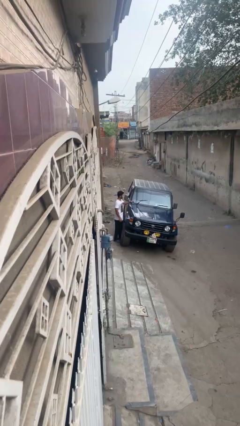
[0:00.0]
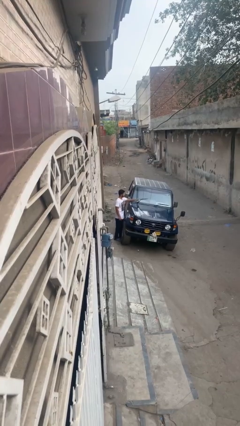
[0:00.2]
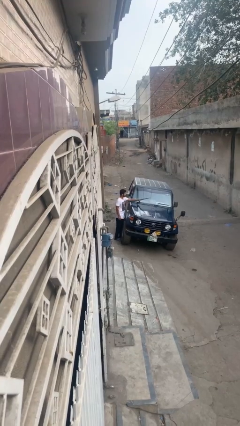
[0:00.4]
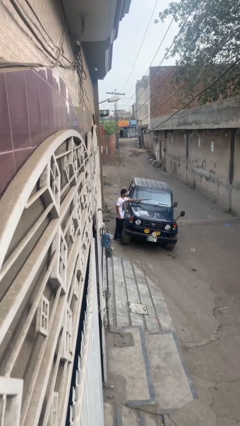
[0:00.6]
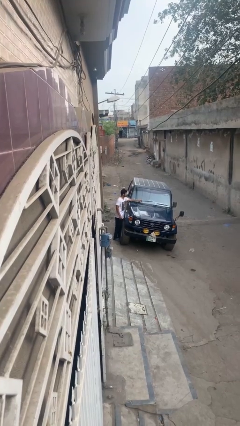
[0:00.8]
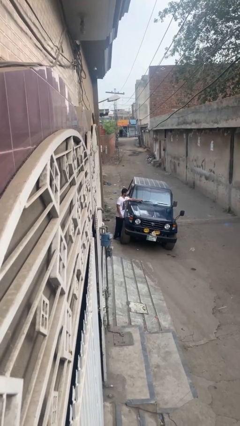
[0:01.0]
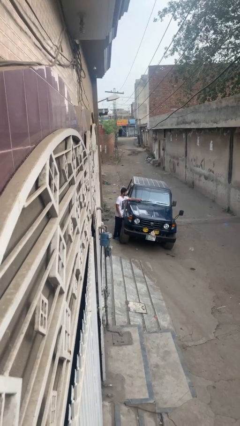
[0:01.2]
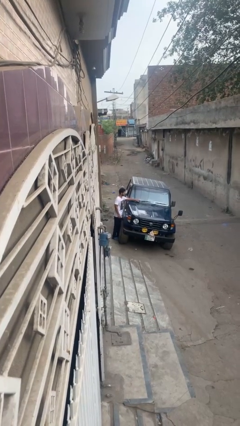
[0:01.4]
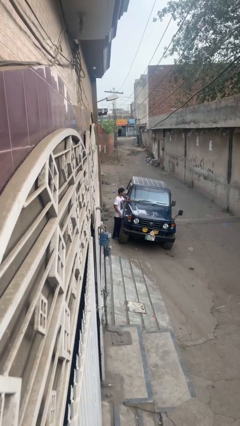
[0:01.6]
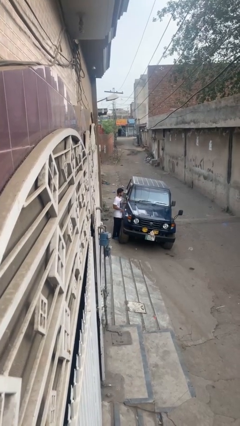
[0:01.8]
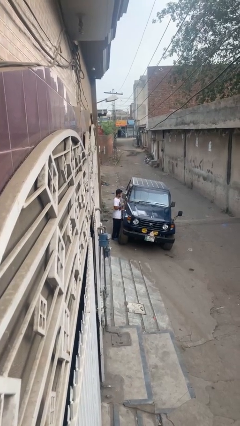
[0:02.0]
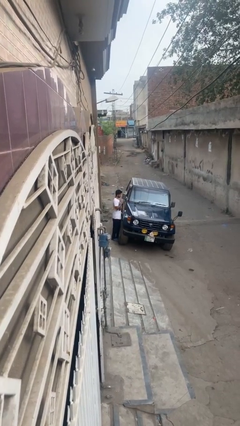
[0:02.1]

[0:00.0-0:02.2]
person flips down car wipers

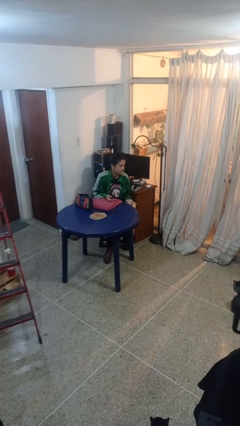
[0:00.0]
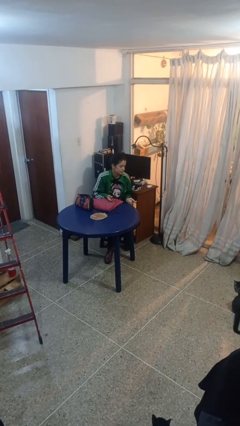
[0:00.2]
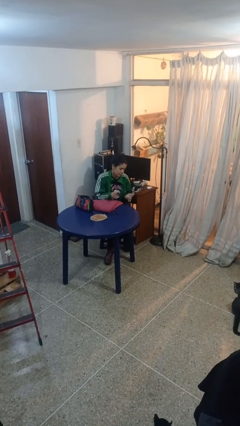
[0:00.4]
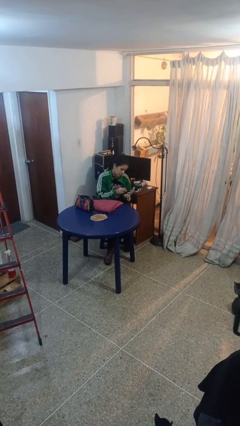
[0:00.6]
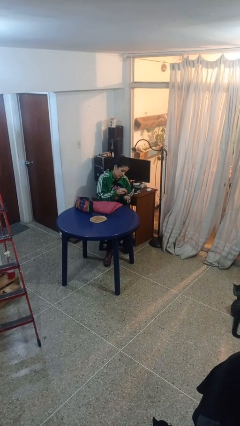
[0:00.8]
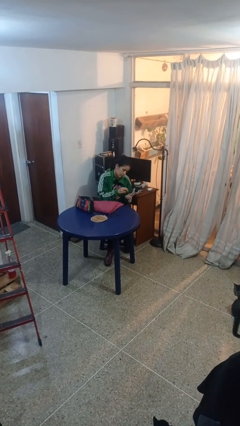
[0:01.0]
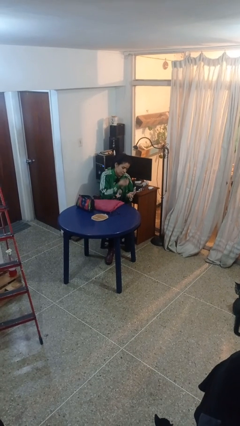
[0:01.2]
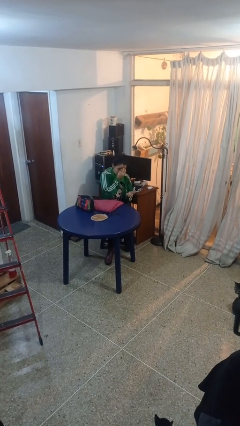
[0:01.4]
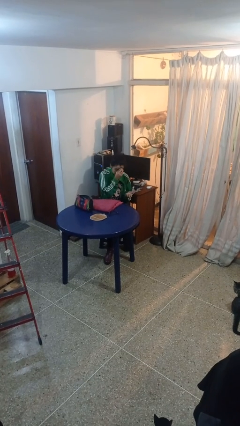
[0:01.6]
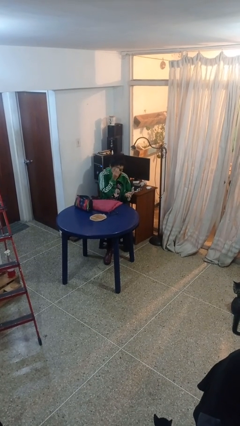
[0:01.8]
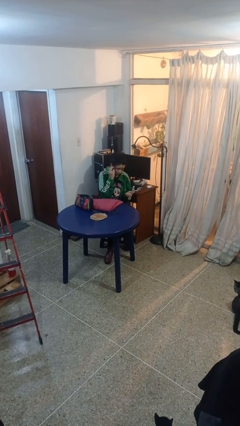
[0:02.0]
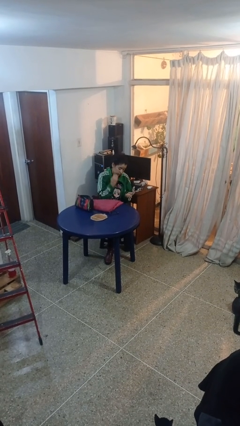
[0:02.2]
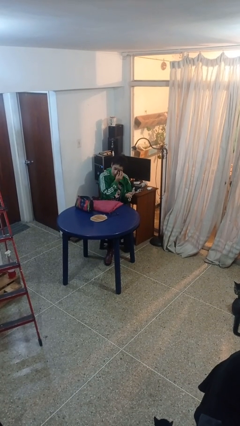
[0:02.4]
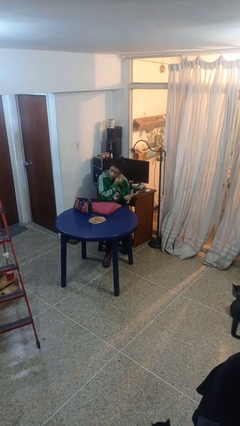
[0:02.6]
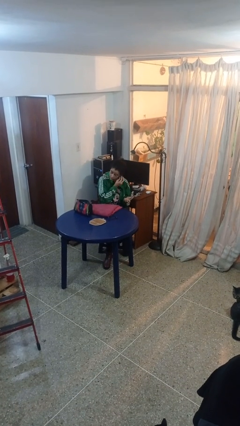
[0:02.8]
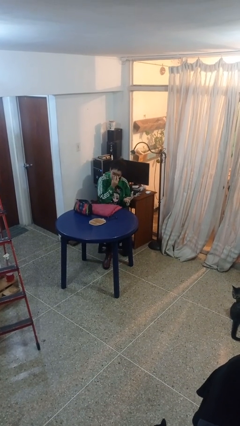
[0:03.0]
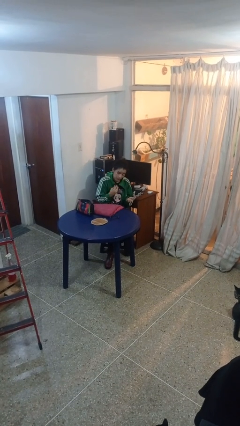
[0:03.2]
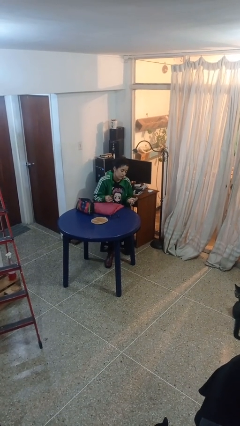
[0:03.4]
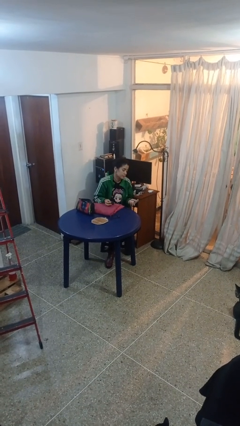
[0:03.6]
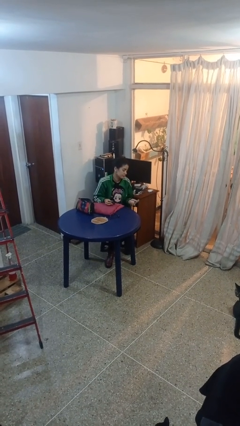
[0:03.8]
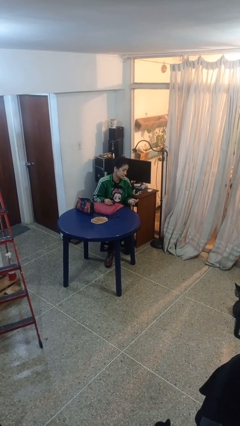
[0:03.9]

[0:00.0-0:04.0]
person applies foundation makeup

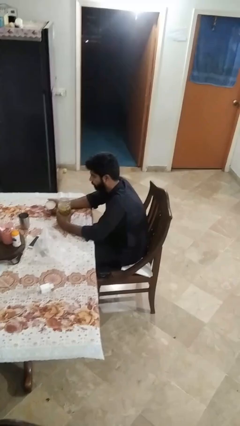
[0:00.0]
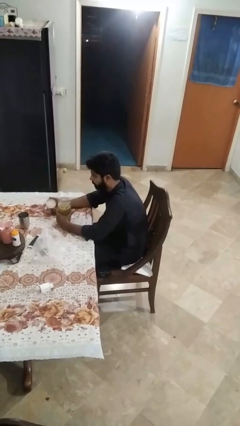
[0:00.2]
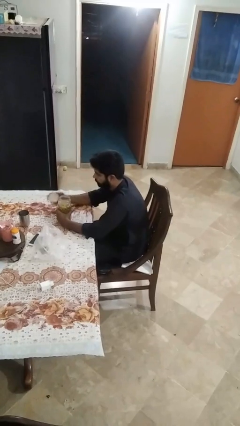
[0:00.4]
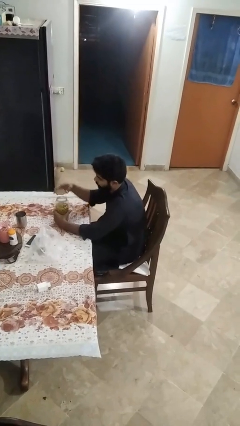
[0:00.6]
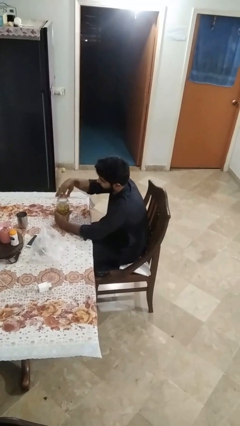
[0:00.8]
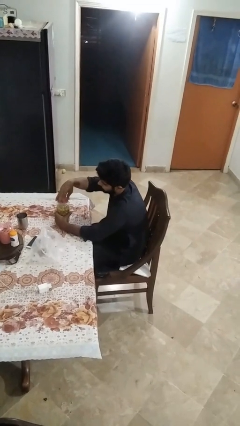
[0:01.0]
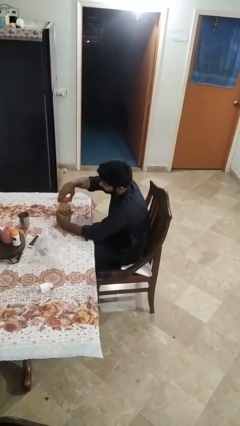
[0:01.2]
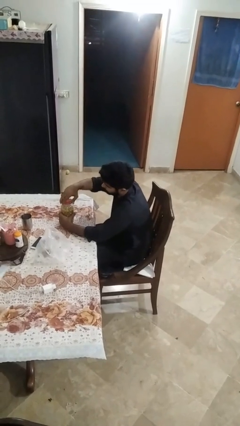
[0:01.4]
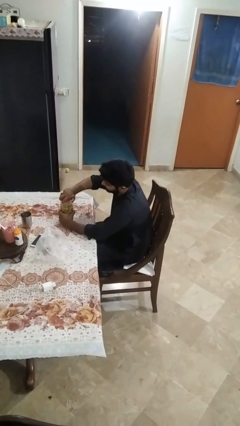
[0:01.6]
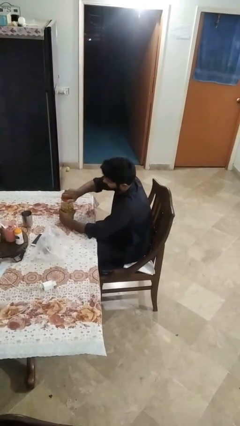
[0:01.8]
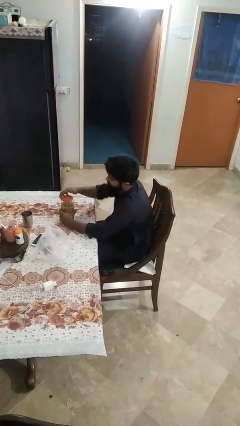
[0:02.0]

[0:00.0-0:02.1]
person closes jar

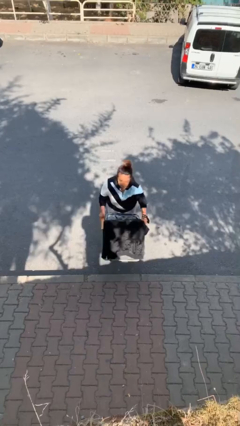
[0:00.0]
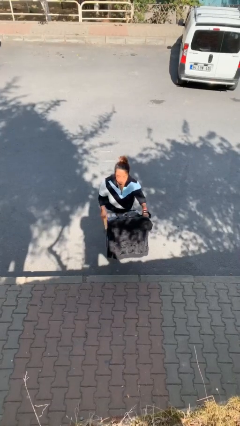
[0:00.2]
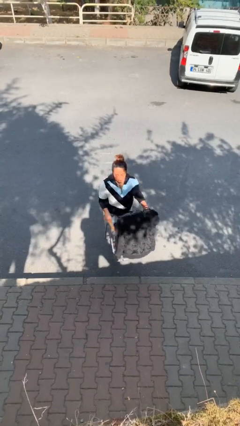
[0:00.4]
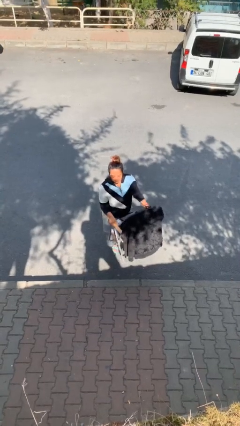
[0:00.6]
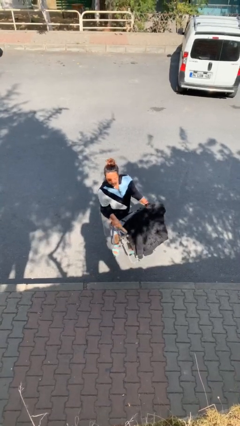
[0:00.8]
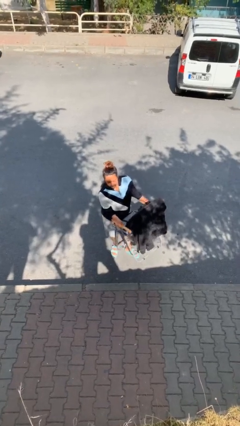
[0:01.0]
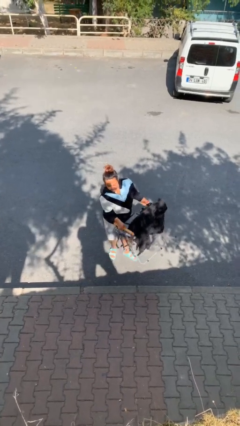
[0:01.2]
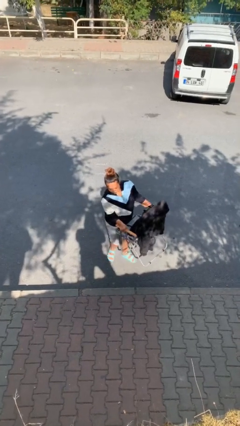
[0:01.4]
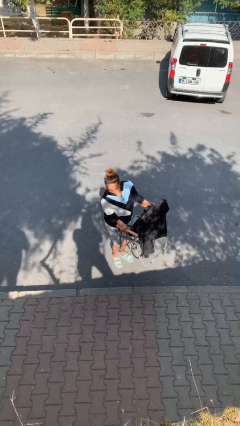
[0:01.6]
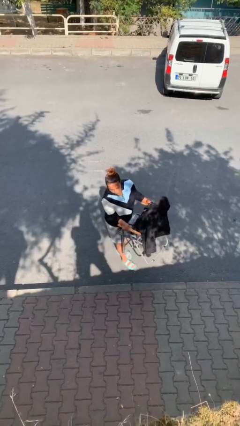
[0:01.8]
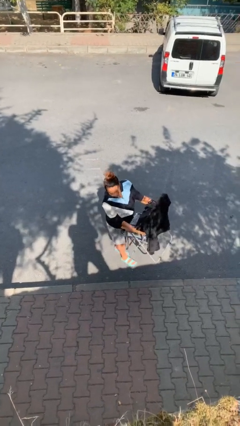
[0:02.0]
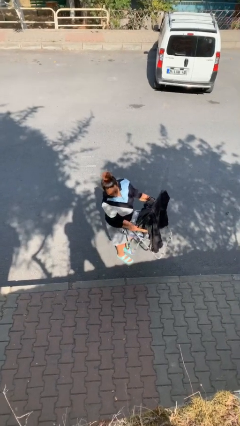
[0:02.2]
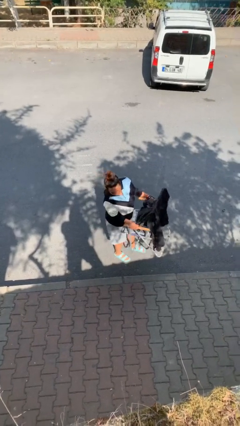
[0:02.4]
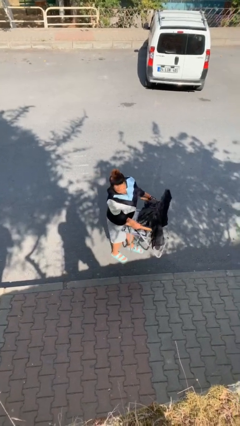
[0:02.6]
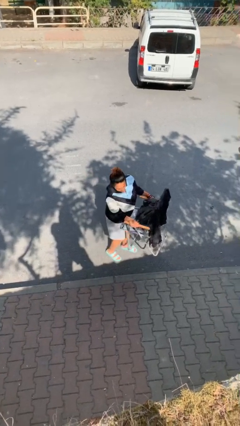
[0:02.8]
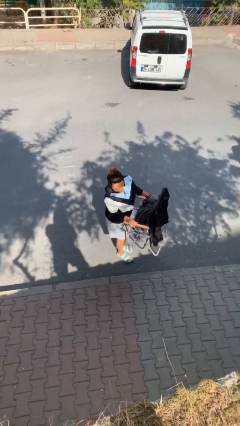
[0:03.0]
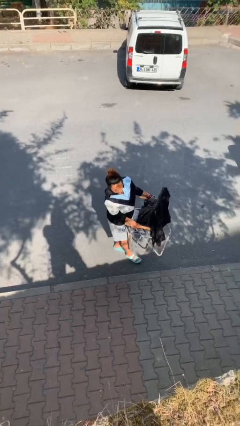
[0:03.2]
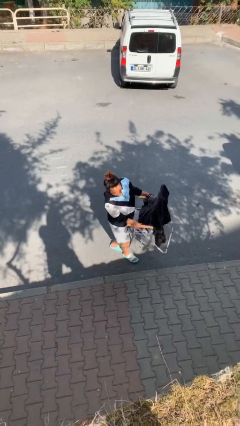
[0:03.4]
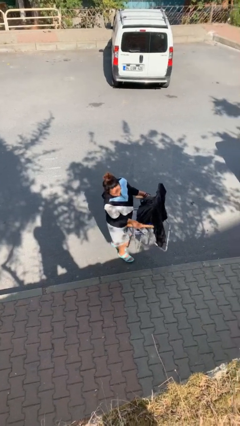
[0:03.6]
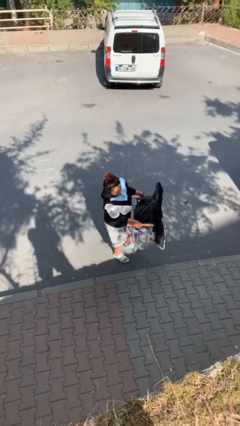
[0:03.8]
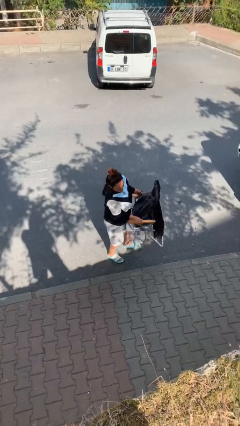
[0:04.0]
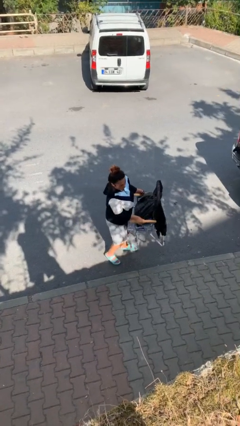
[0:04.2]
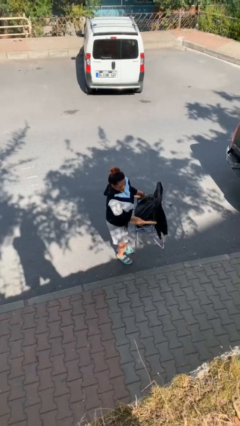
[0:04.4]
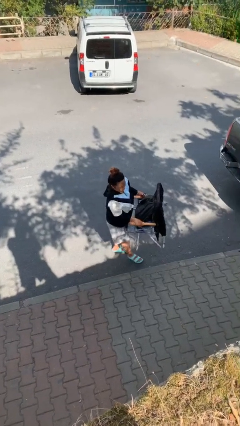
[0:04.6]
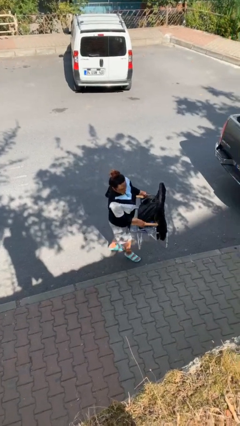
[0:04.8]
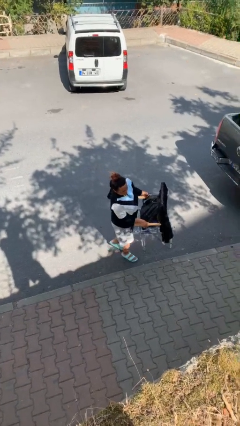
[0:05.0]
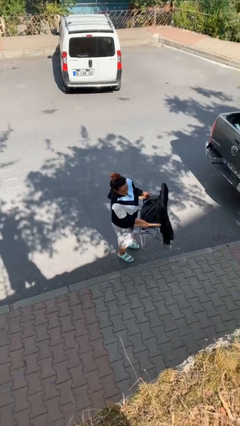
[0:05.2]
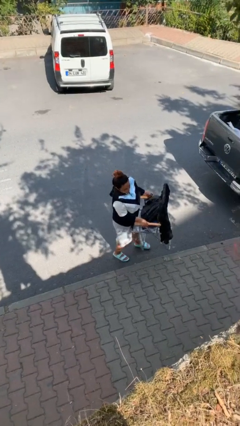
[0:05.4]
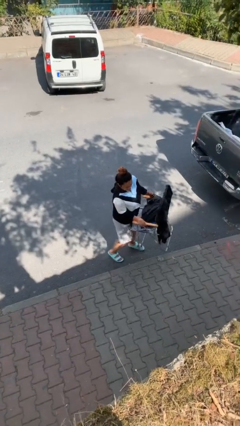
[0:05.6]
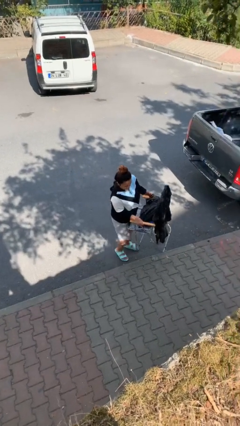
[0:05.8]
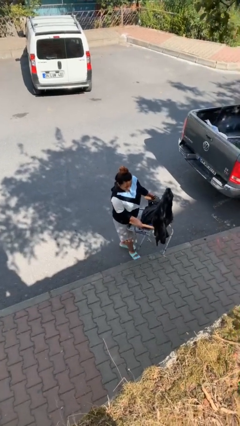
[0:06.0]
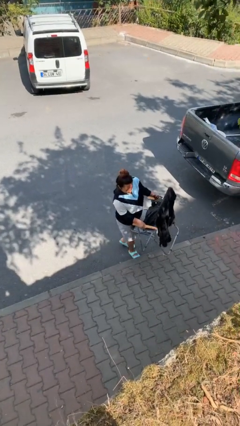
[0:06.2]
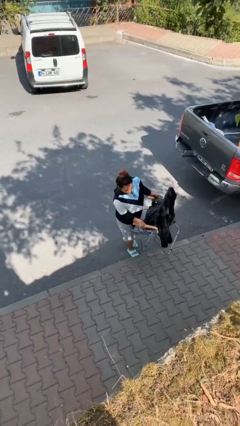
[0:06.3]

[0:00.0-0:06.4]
person carries heavy object

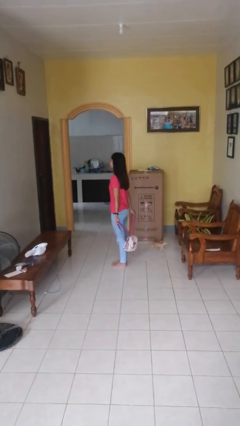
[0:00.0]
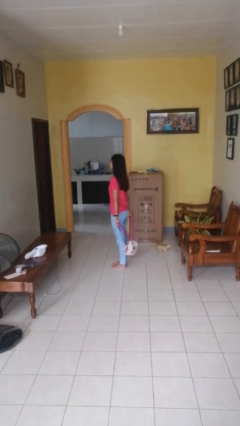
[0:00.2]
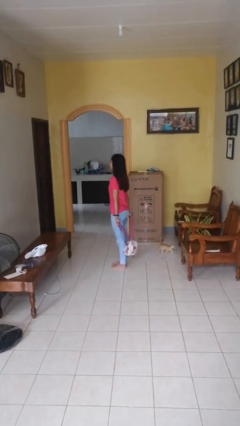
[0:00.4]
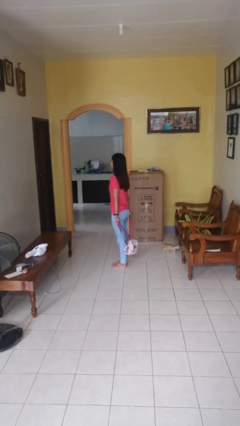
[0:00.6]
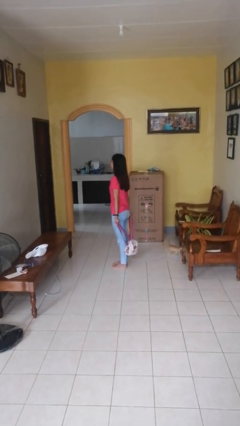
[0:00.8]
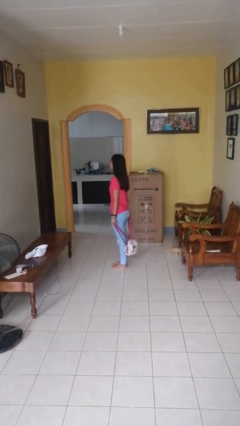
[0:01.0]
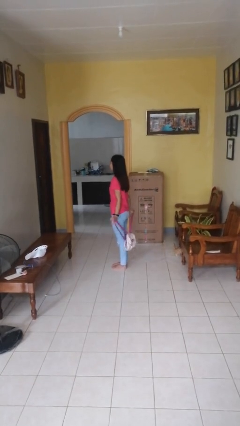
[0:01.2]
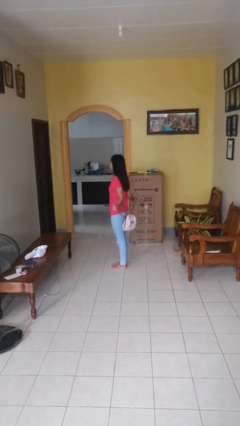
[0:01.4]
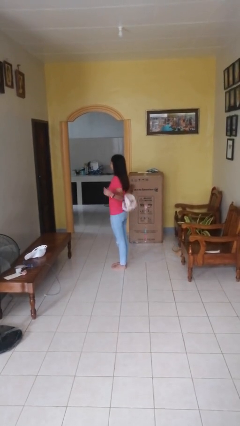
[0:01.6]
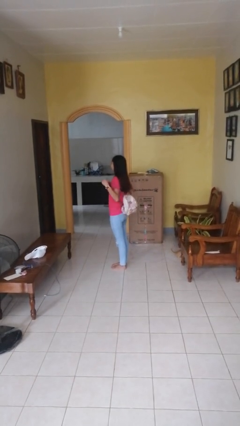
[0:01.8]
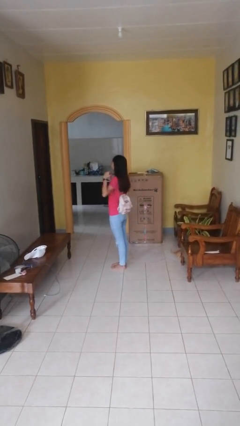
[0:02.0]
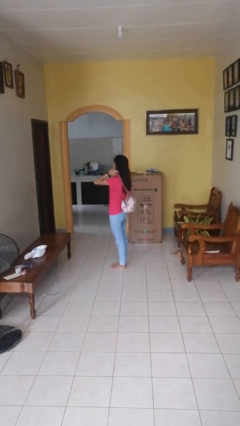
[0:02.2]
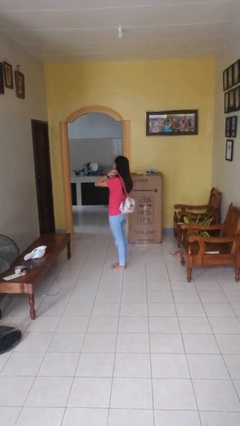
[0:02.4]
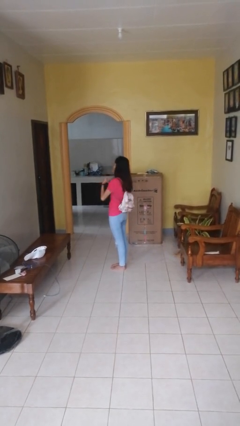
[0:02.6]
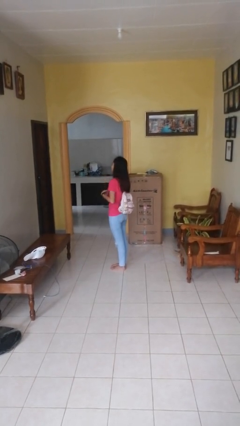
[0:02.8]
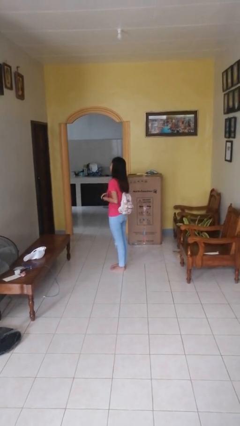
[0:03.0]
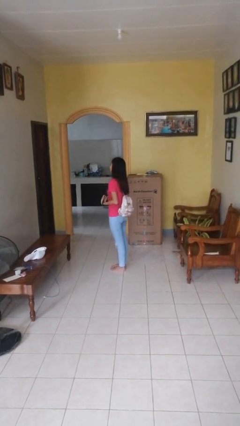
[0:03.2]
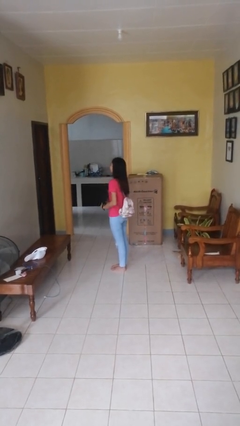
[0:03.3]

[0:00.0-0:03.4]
person puts on backpack
